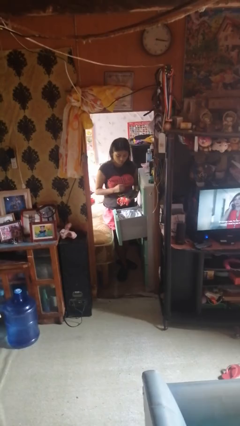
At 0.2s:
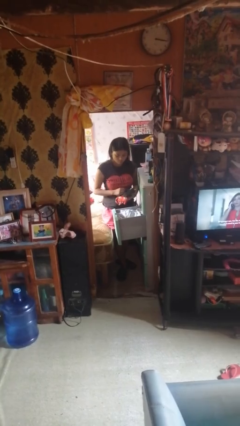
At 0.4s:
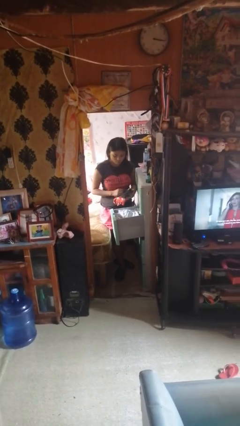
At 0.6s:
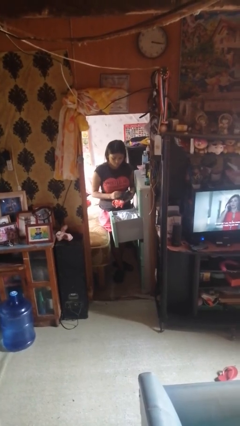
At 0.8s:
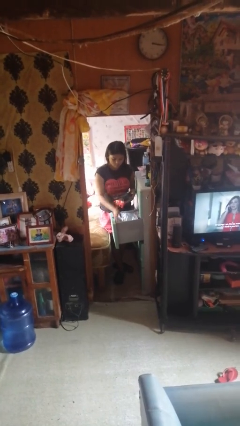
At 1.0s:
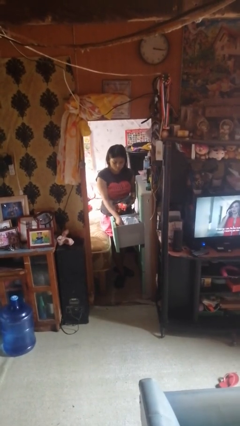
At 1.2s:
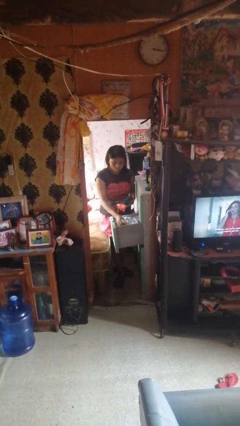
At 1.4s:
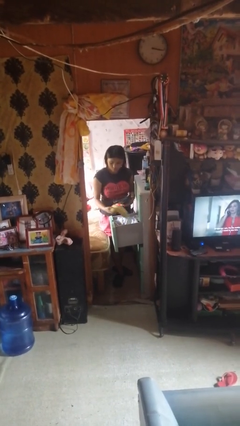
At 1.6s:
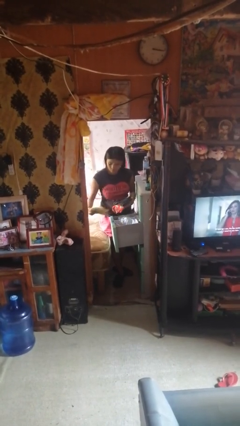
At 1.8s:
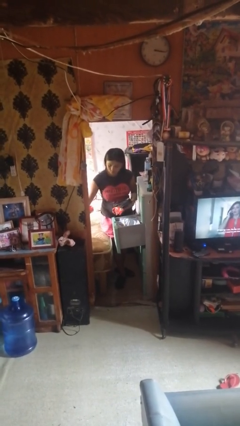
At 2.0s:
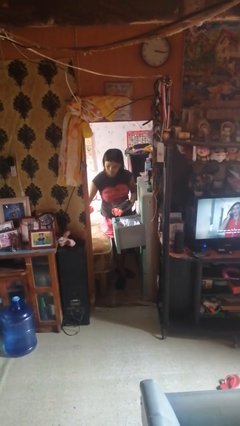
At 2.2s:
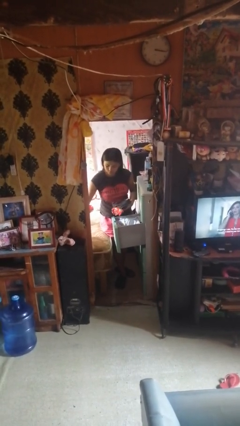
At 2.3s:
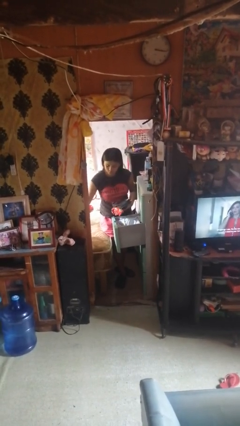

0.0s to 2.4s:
person takes clothes from dresser

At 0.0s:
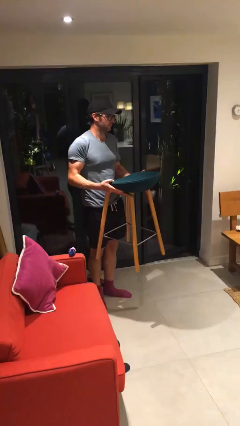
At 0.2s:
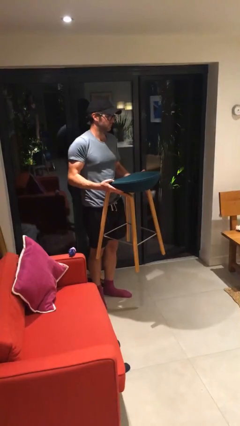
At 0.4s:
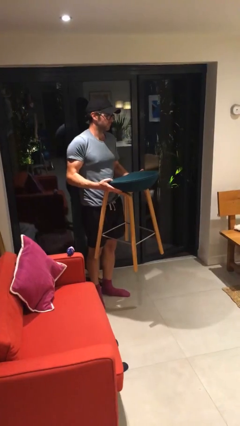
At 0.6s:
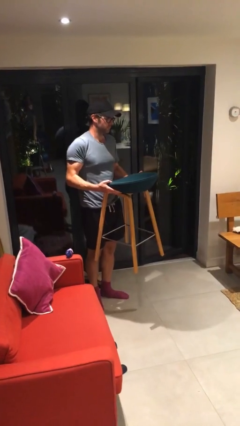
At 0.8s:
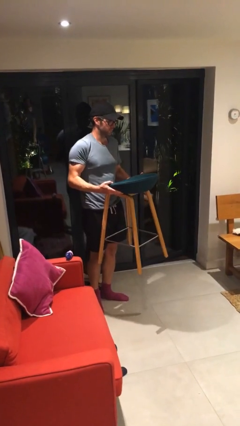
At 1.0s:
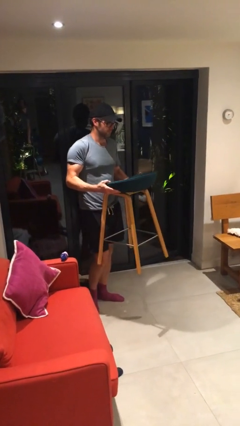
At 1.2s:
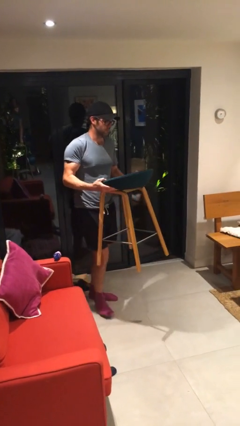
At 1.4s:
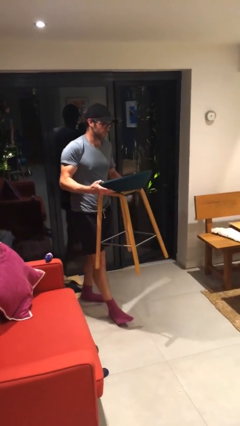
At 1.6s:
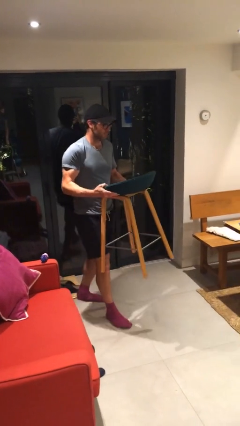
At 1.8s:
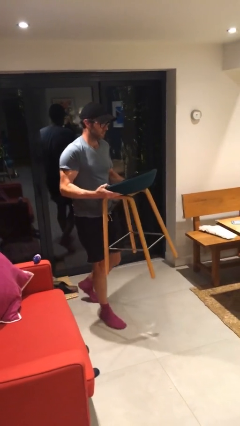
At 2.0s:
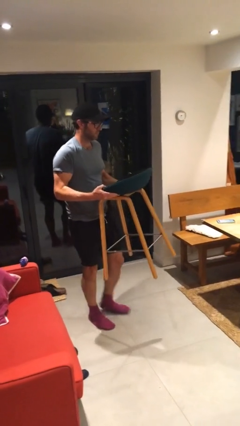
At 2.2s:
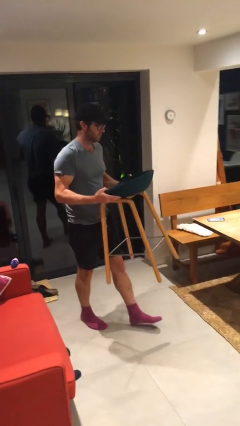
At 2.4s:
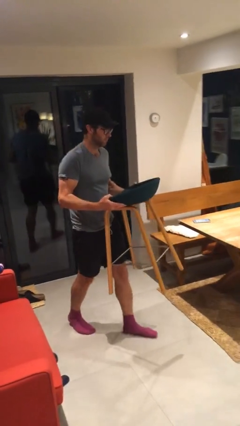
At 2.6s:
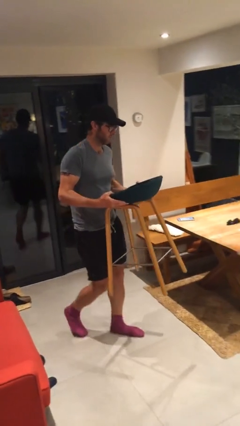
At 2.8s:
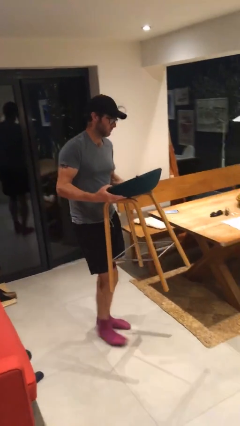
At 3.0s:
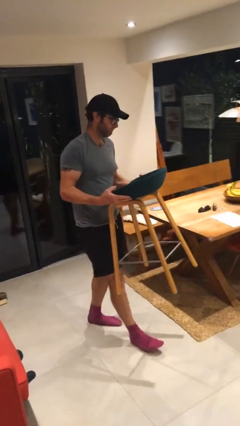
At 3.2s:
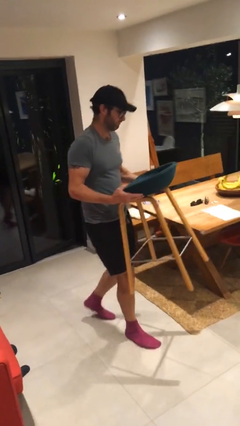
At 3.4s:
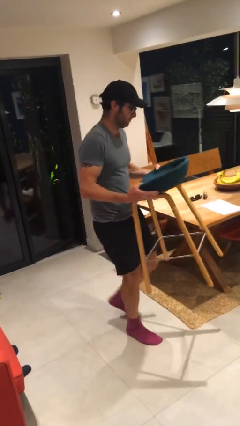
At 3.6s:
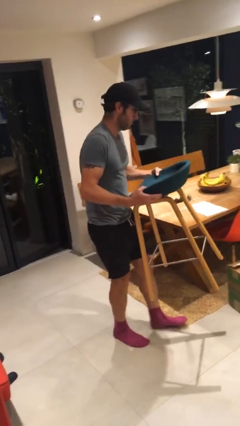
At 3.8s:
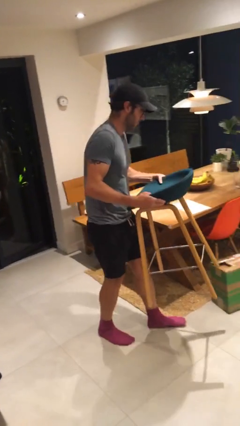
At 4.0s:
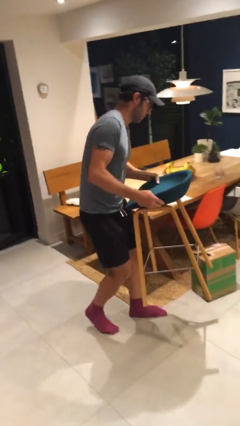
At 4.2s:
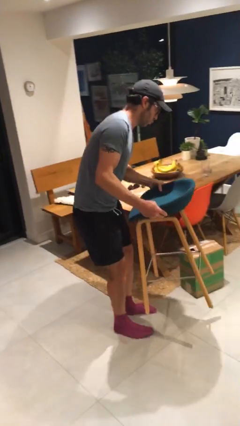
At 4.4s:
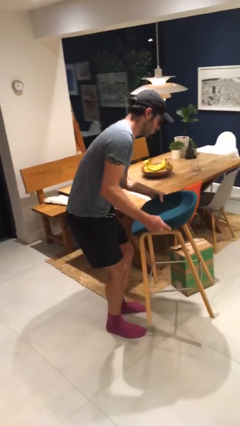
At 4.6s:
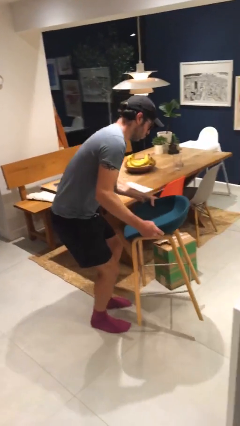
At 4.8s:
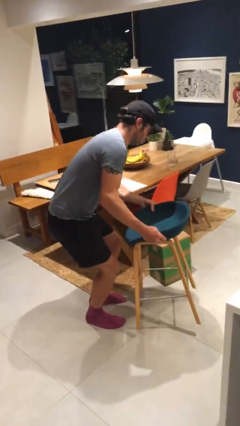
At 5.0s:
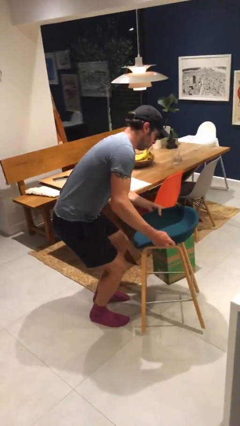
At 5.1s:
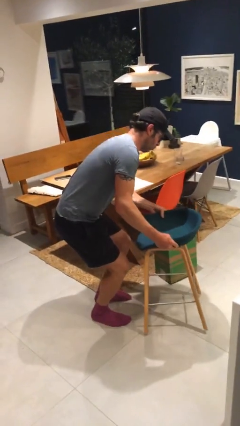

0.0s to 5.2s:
person carries heavy object

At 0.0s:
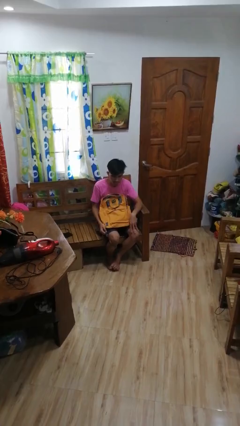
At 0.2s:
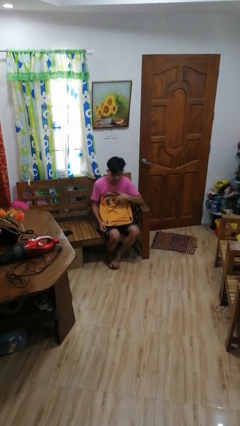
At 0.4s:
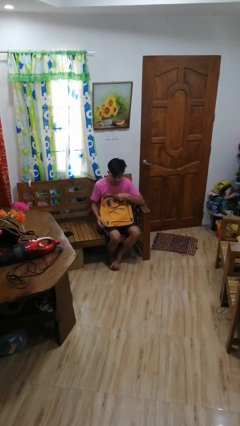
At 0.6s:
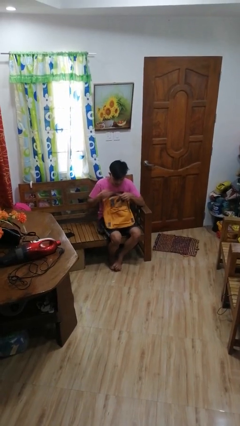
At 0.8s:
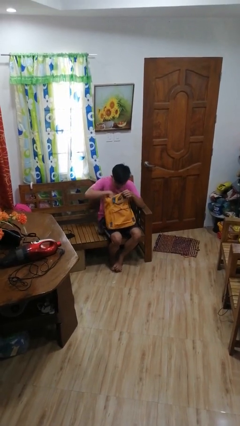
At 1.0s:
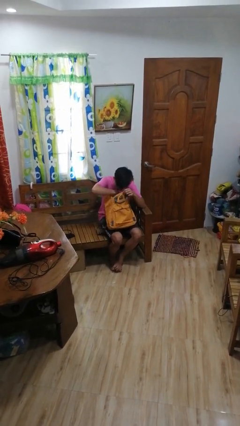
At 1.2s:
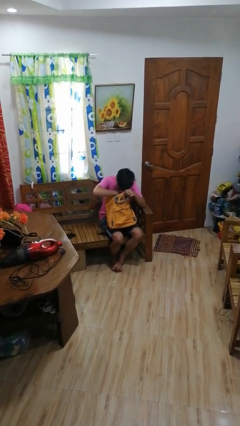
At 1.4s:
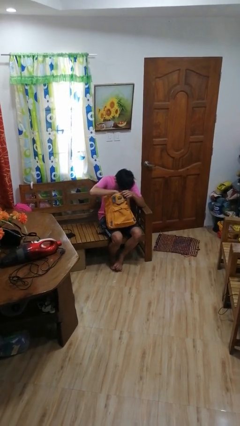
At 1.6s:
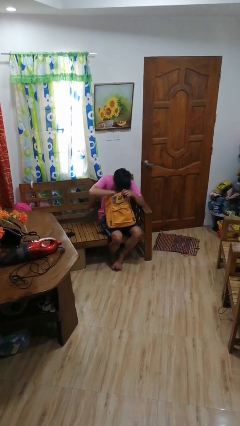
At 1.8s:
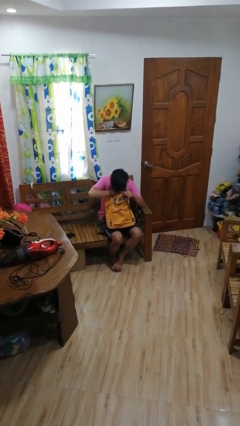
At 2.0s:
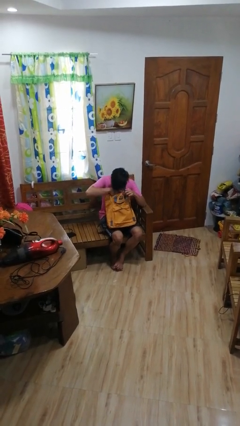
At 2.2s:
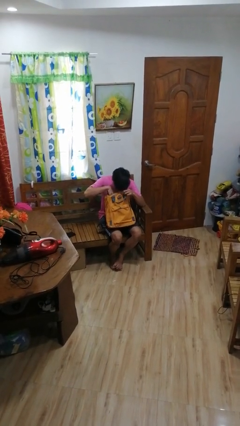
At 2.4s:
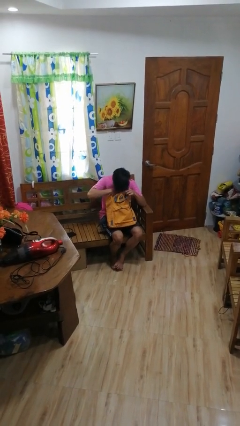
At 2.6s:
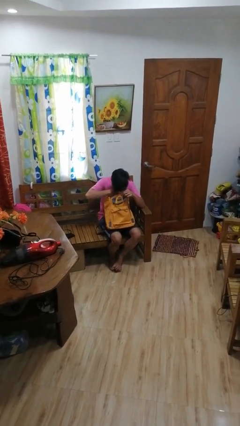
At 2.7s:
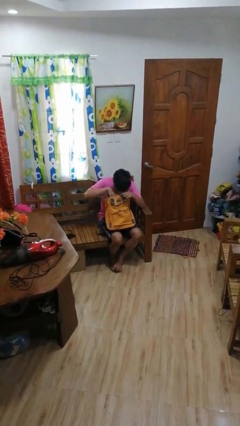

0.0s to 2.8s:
person searches in backpack

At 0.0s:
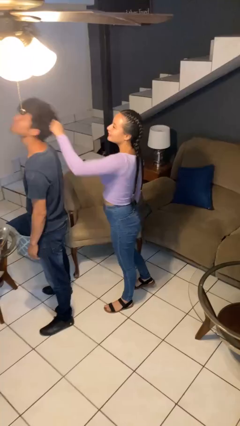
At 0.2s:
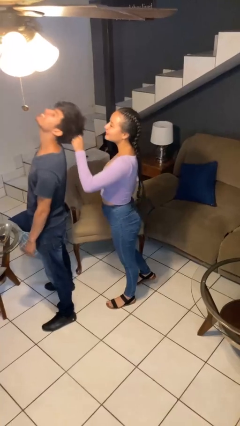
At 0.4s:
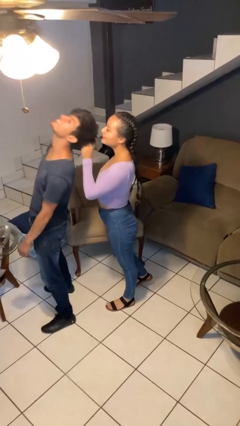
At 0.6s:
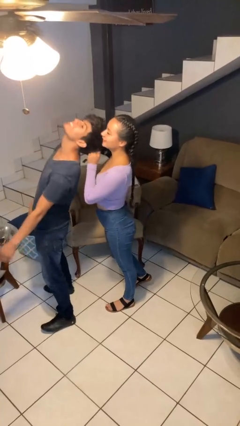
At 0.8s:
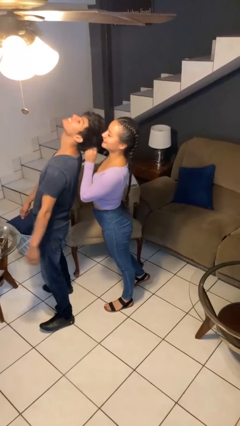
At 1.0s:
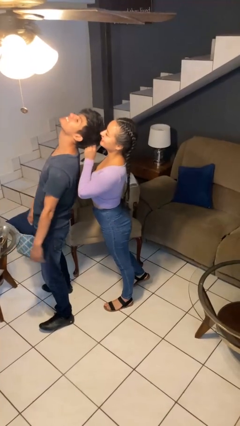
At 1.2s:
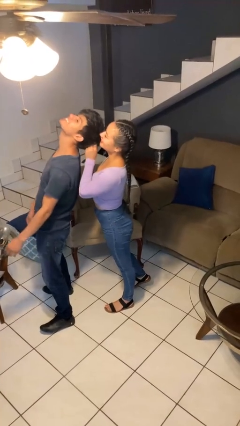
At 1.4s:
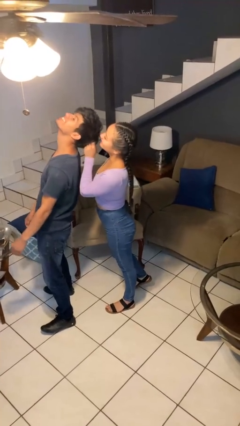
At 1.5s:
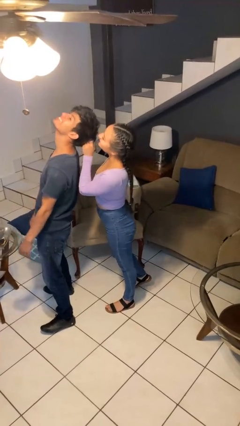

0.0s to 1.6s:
person grabs person by hair

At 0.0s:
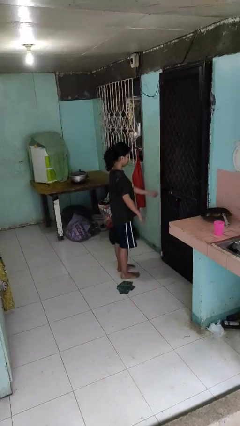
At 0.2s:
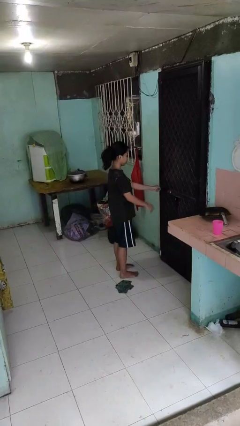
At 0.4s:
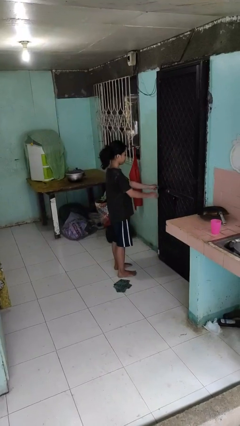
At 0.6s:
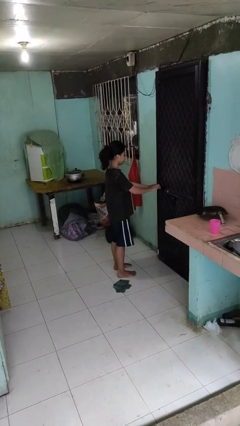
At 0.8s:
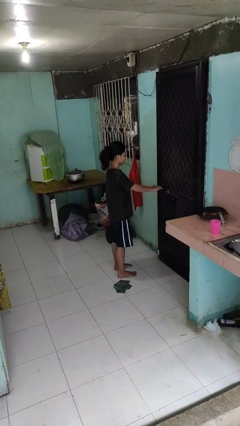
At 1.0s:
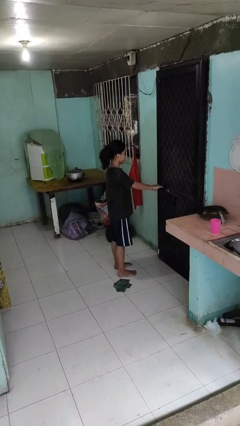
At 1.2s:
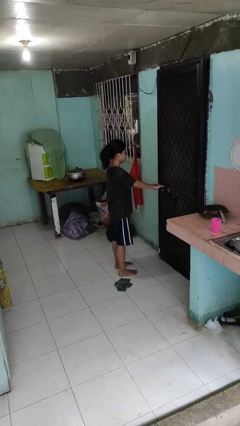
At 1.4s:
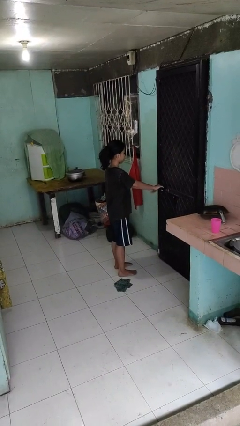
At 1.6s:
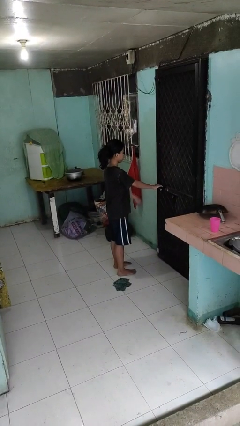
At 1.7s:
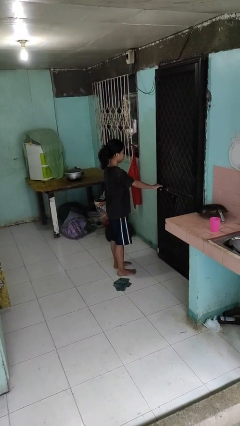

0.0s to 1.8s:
person unlocks door with keys

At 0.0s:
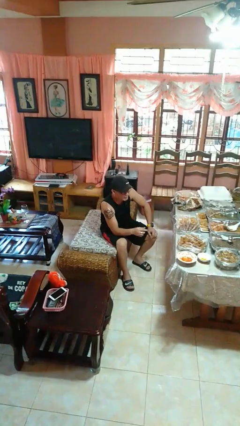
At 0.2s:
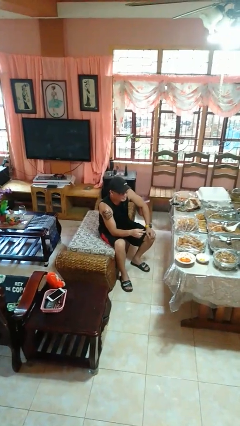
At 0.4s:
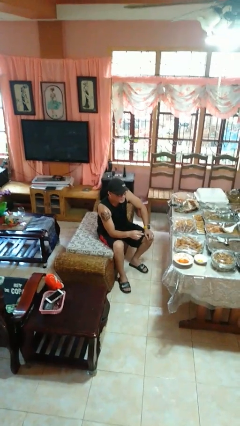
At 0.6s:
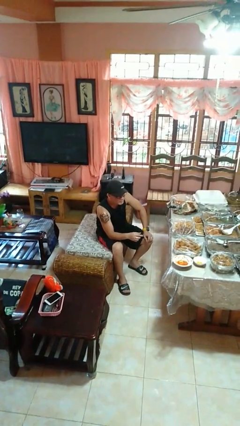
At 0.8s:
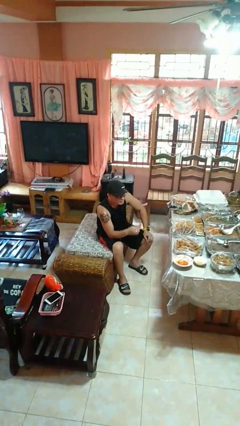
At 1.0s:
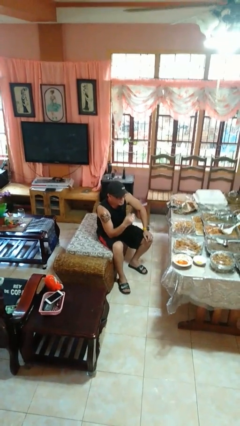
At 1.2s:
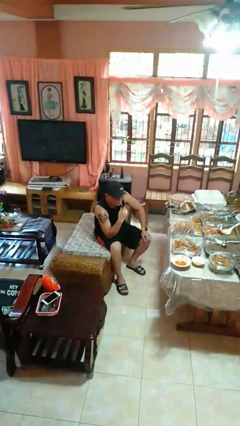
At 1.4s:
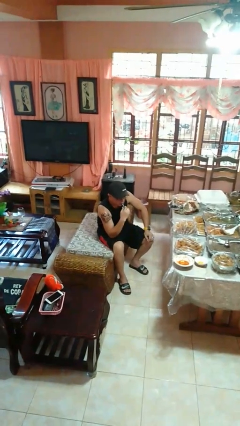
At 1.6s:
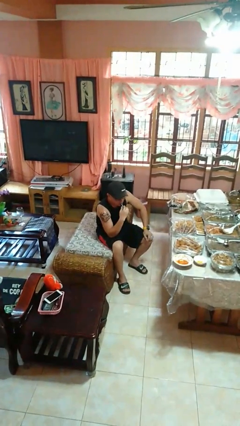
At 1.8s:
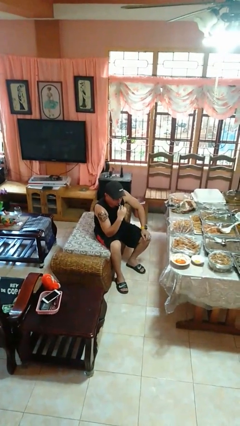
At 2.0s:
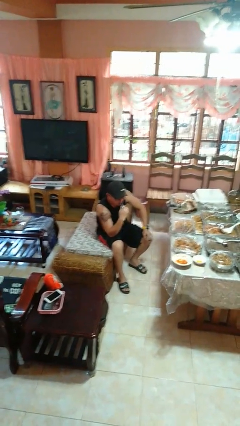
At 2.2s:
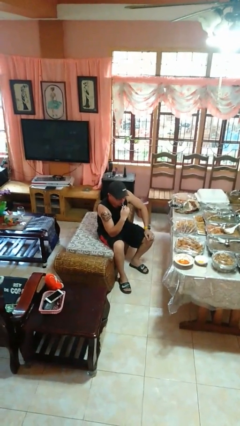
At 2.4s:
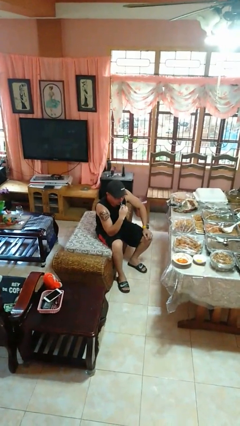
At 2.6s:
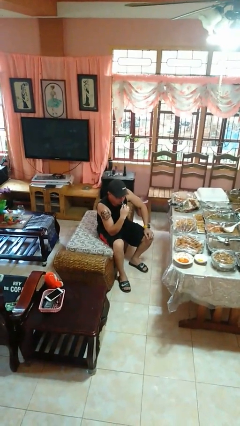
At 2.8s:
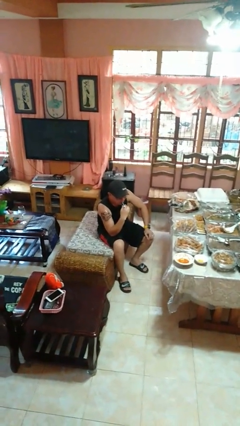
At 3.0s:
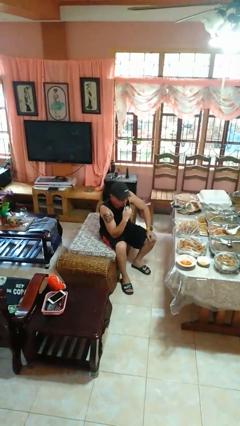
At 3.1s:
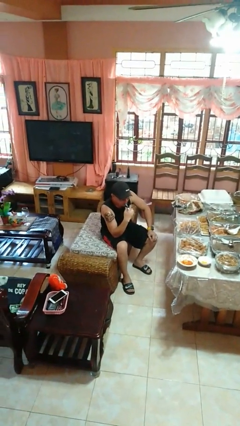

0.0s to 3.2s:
person vapes

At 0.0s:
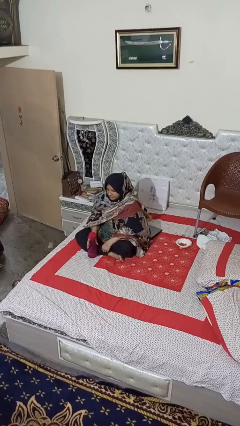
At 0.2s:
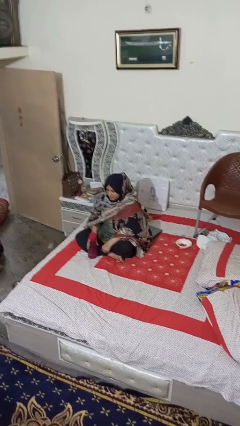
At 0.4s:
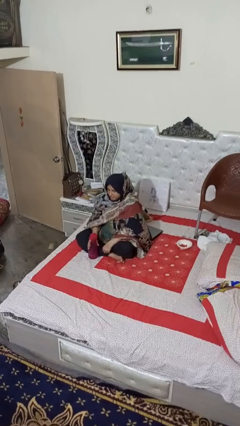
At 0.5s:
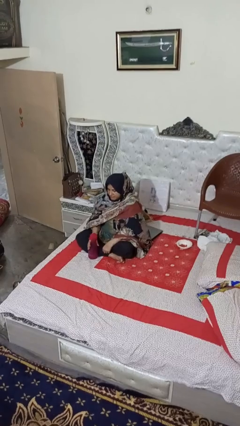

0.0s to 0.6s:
person drinks from bottle
